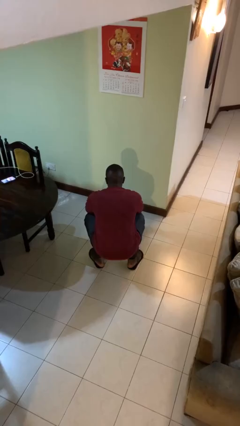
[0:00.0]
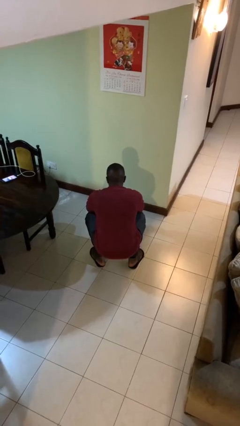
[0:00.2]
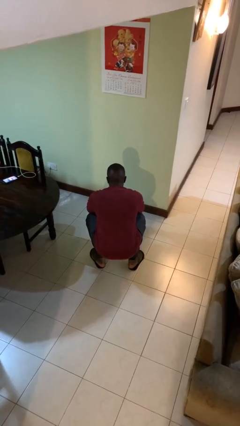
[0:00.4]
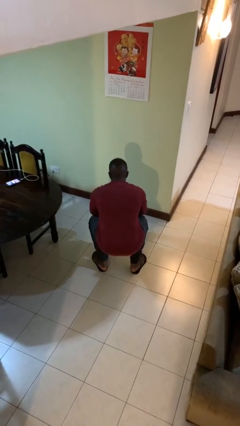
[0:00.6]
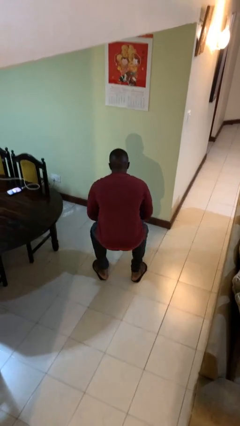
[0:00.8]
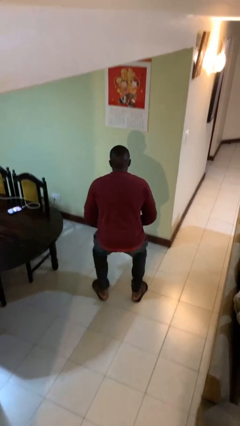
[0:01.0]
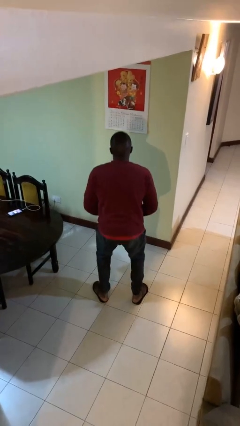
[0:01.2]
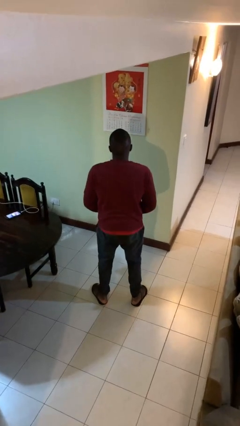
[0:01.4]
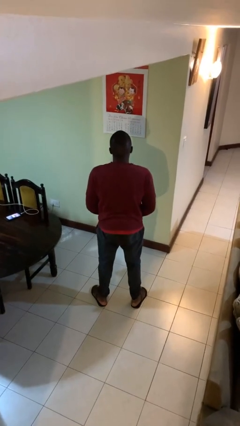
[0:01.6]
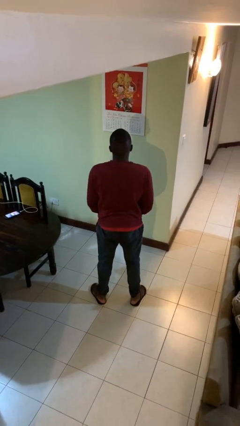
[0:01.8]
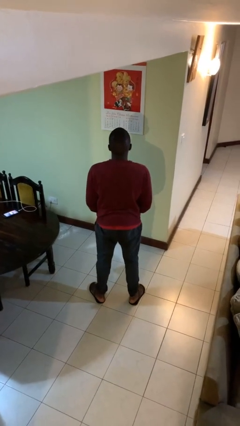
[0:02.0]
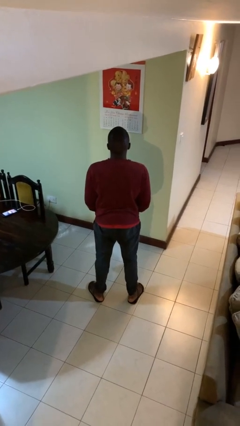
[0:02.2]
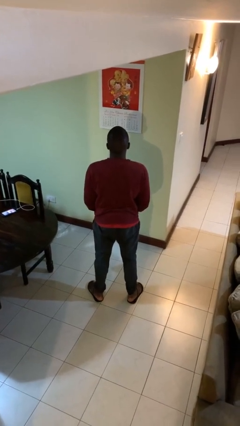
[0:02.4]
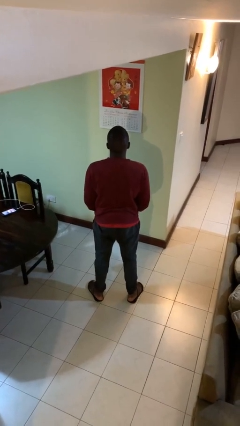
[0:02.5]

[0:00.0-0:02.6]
person stands up

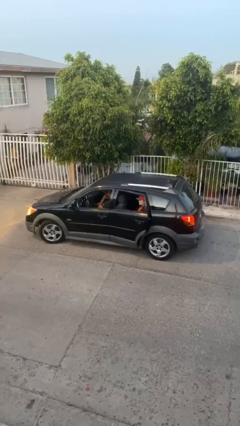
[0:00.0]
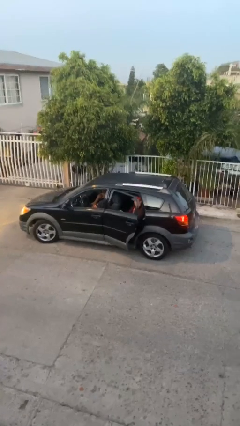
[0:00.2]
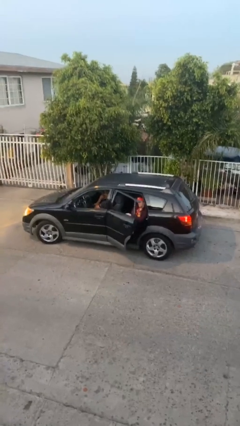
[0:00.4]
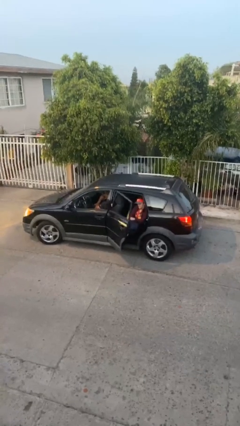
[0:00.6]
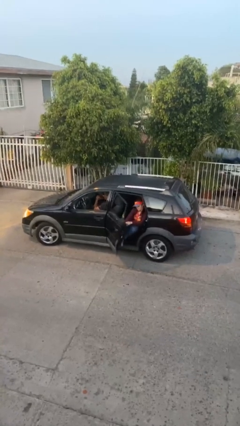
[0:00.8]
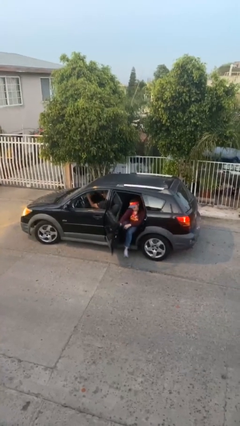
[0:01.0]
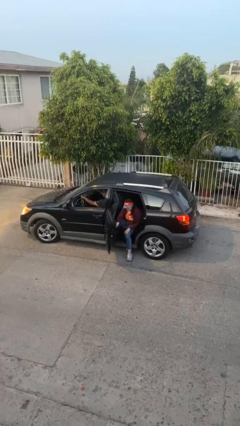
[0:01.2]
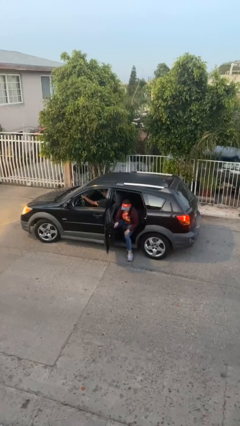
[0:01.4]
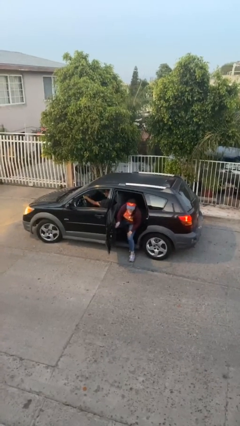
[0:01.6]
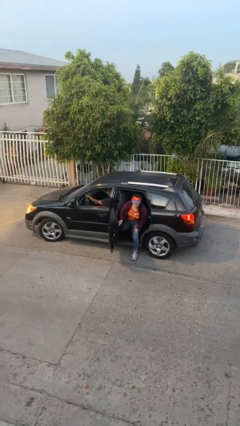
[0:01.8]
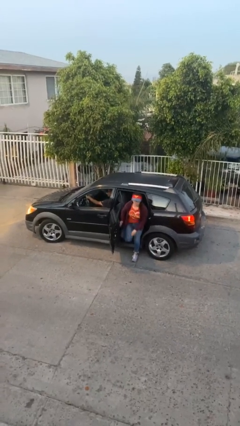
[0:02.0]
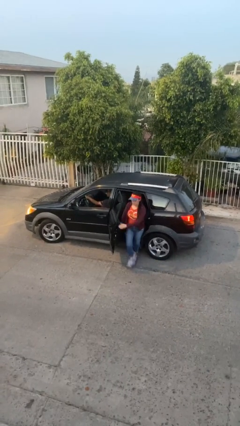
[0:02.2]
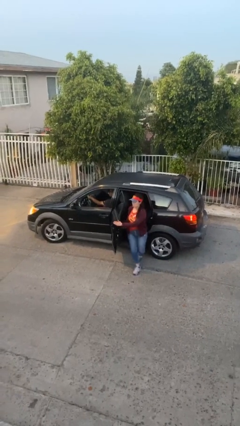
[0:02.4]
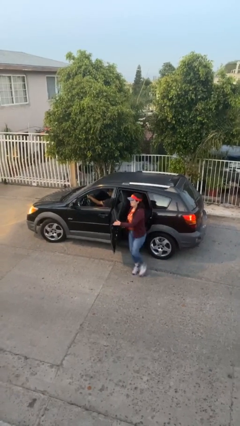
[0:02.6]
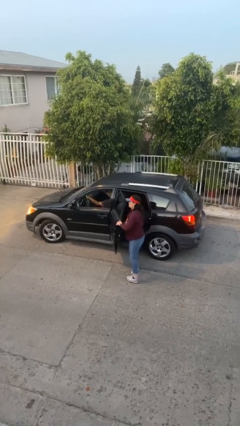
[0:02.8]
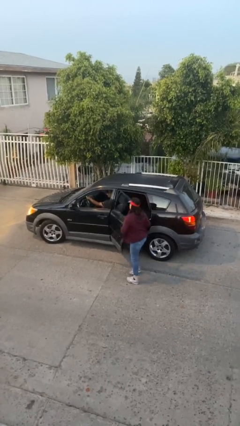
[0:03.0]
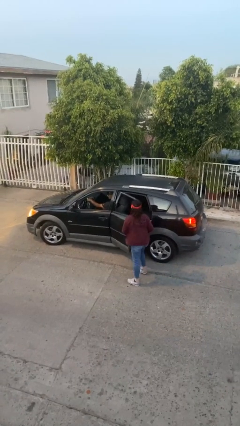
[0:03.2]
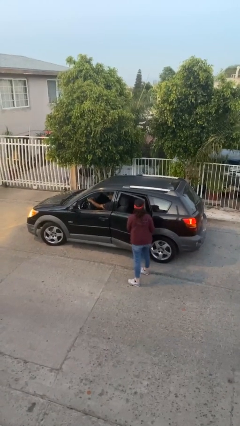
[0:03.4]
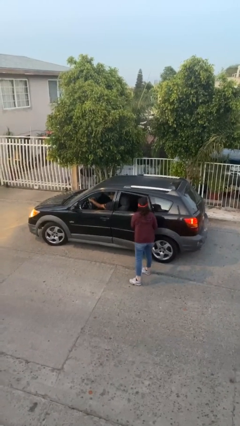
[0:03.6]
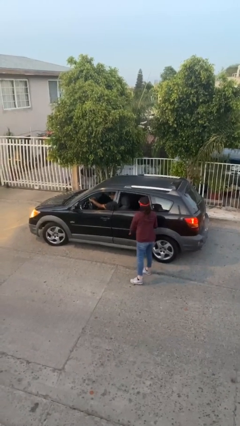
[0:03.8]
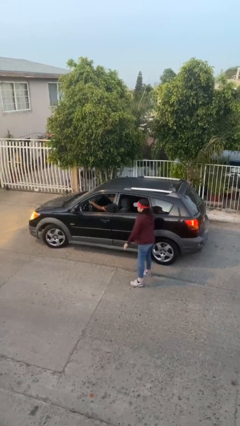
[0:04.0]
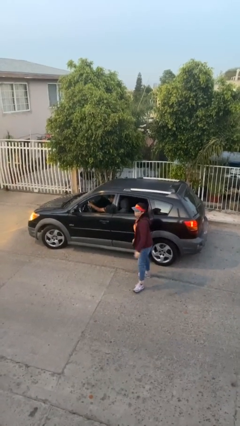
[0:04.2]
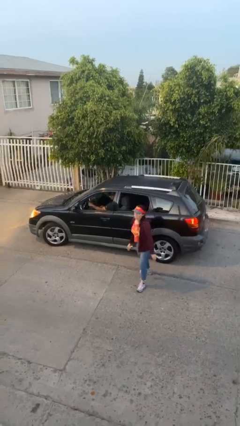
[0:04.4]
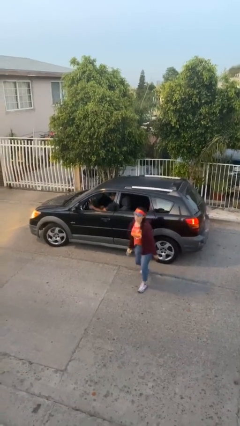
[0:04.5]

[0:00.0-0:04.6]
car drops off person

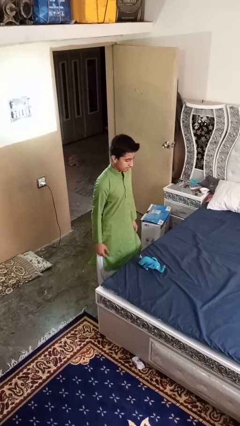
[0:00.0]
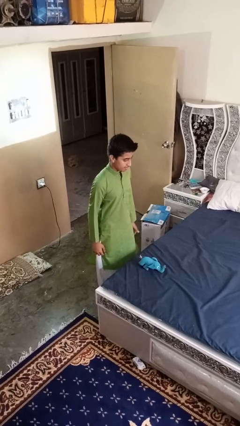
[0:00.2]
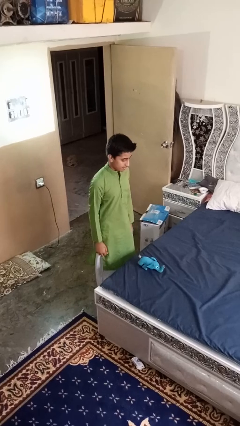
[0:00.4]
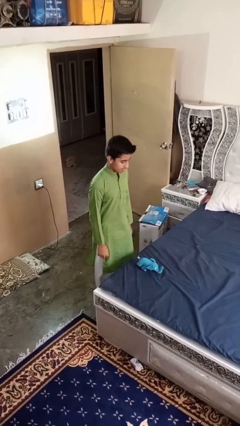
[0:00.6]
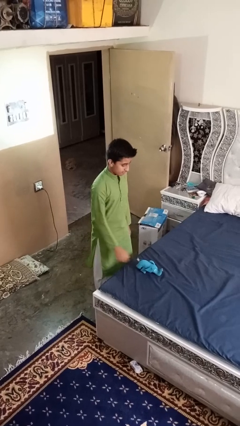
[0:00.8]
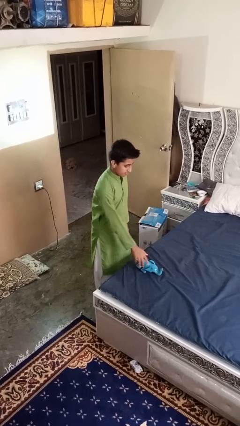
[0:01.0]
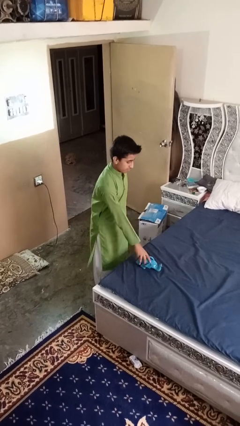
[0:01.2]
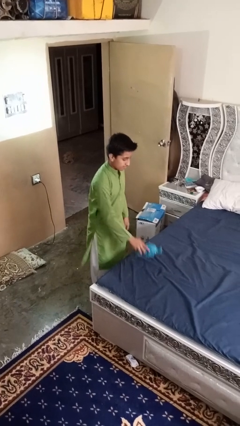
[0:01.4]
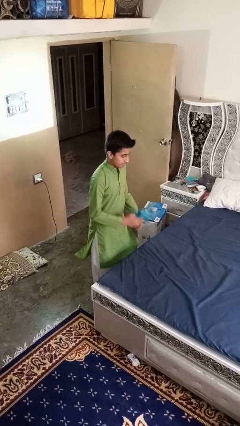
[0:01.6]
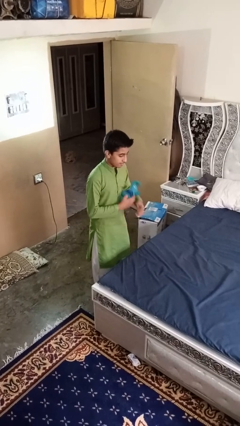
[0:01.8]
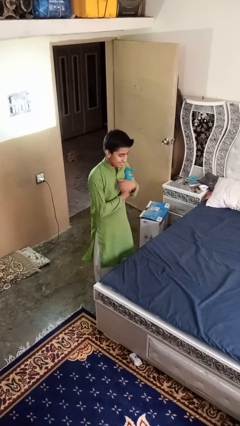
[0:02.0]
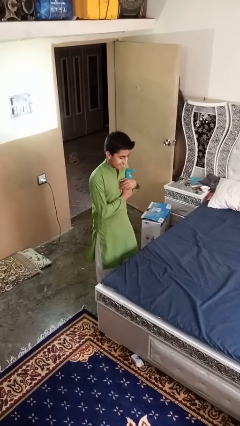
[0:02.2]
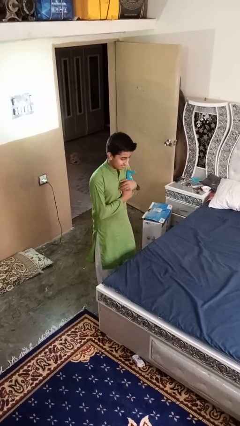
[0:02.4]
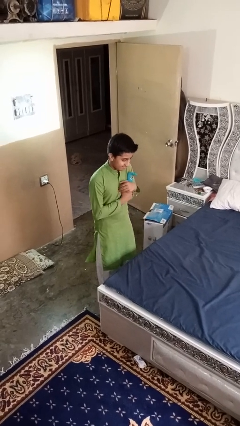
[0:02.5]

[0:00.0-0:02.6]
person hugs stuffed animal

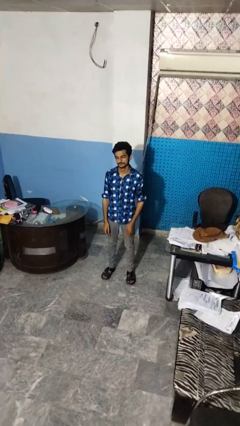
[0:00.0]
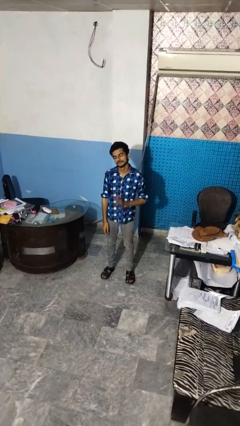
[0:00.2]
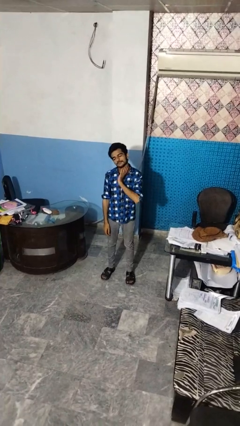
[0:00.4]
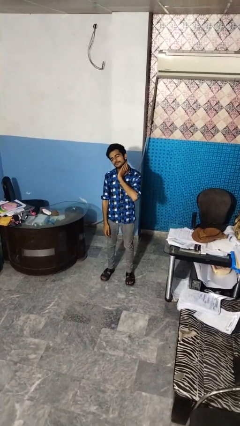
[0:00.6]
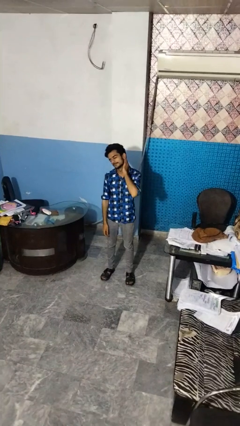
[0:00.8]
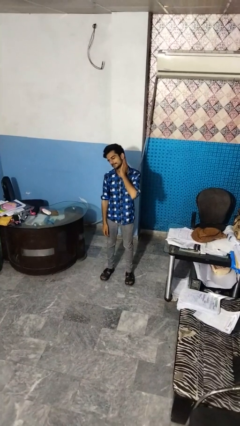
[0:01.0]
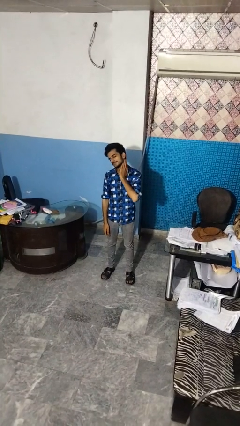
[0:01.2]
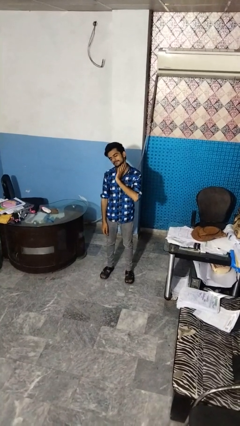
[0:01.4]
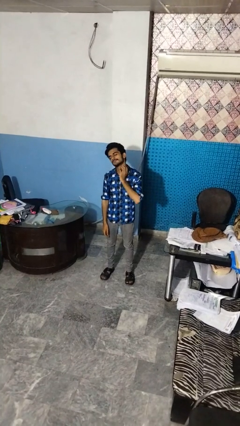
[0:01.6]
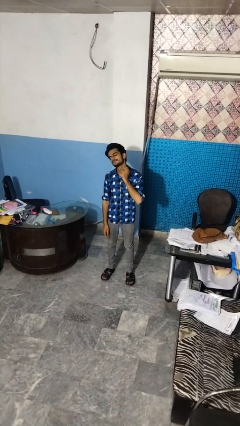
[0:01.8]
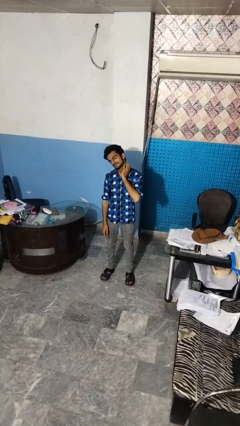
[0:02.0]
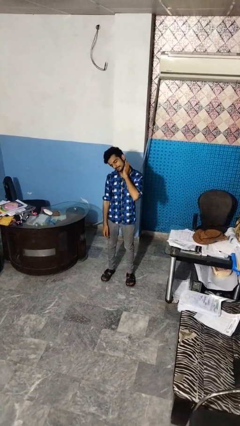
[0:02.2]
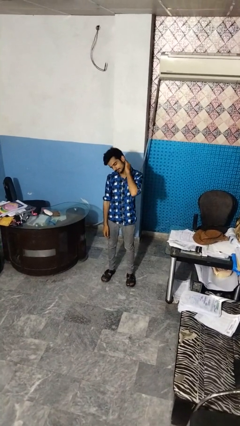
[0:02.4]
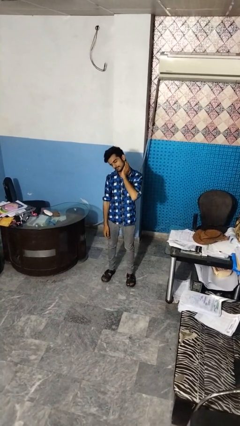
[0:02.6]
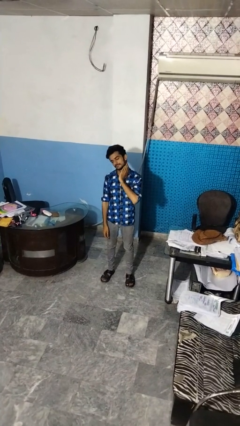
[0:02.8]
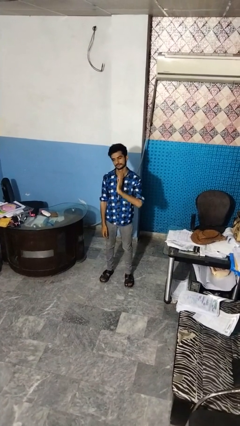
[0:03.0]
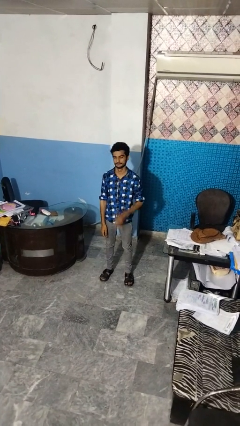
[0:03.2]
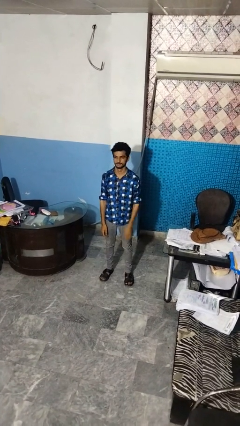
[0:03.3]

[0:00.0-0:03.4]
person rubs neck

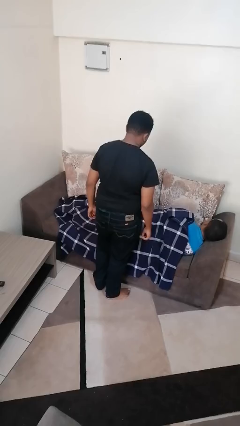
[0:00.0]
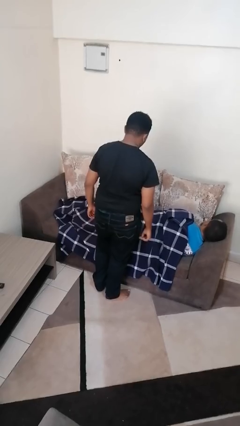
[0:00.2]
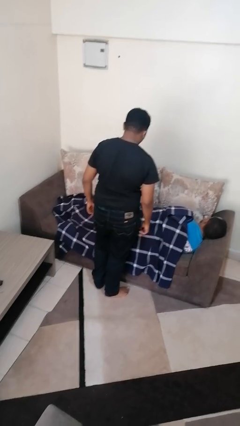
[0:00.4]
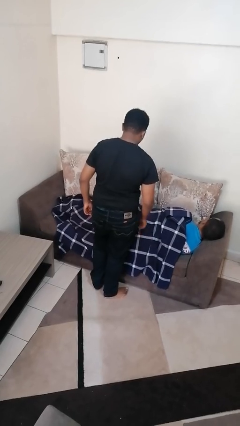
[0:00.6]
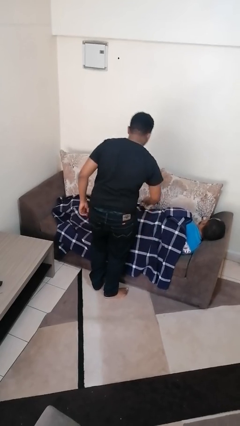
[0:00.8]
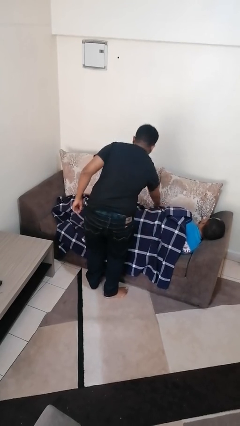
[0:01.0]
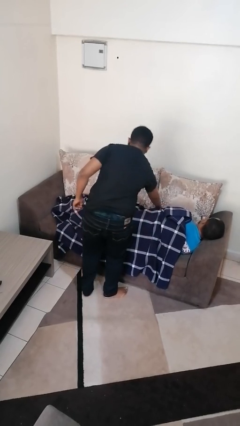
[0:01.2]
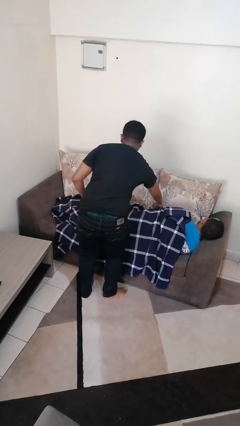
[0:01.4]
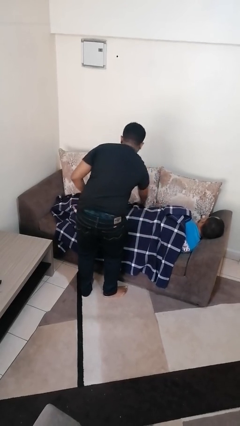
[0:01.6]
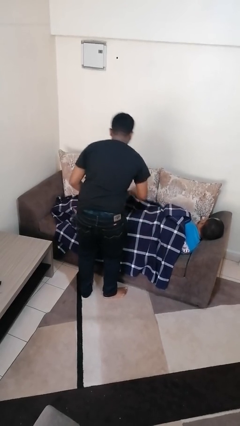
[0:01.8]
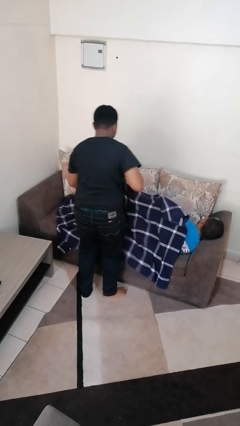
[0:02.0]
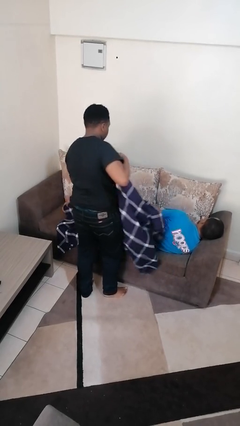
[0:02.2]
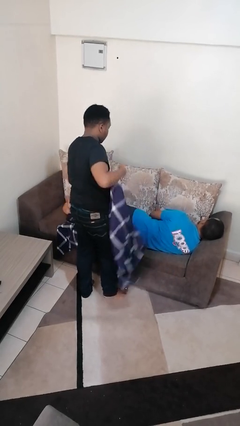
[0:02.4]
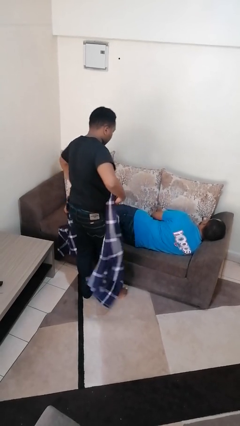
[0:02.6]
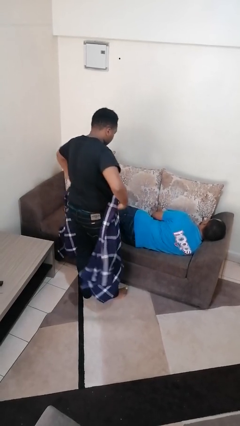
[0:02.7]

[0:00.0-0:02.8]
person uncovers friend with blanket

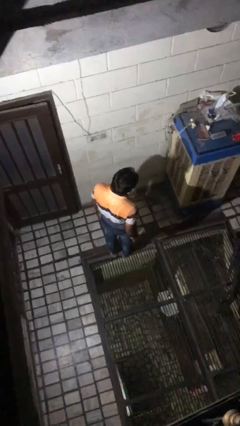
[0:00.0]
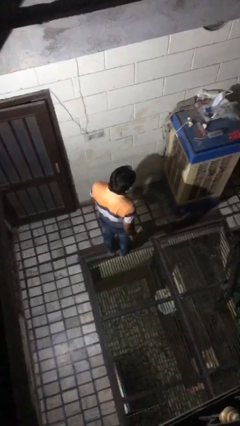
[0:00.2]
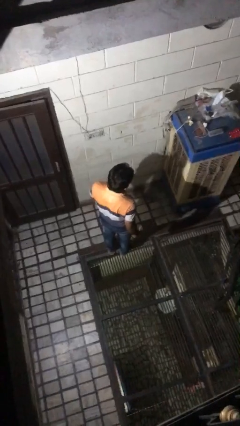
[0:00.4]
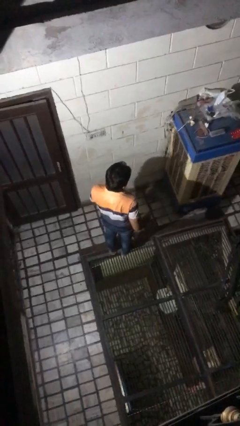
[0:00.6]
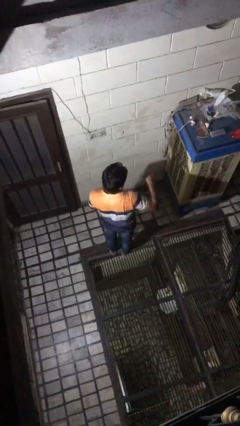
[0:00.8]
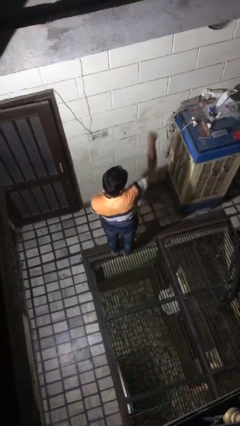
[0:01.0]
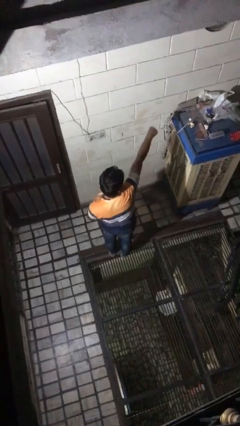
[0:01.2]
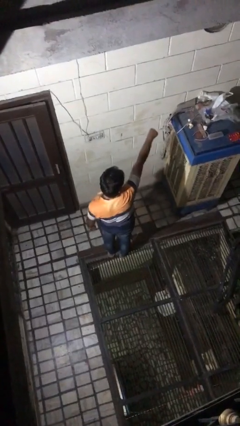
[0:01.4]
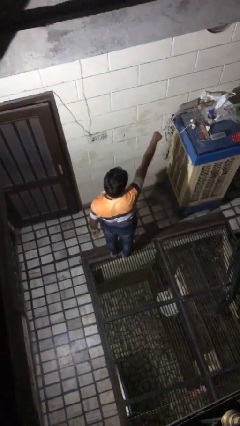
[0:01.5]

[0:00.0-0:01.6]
person punches
